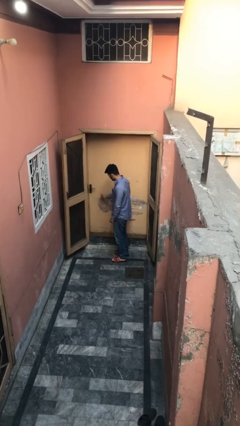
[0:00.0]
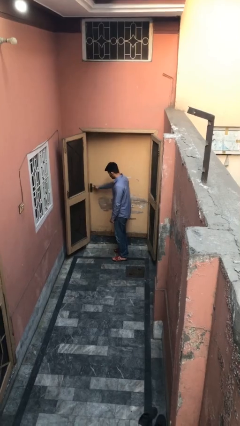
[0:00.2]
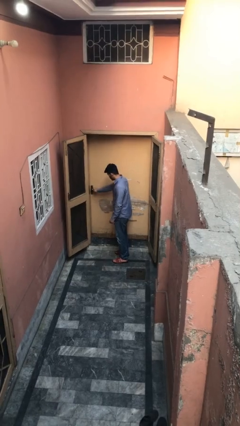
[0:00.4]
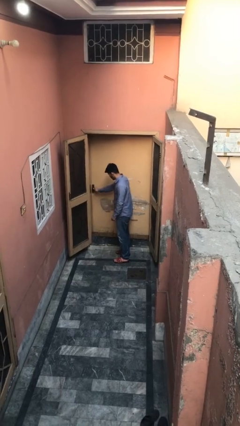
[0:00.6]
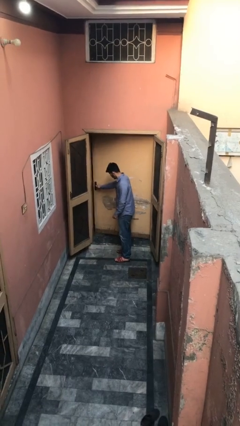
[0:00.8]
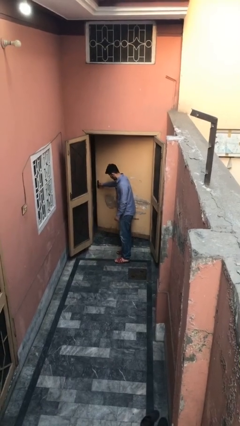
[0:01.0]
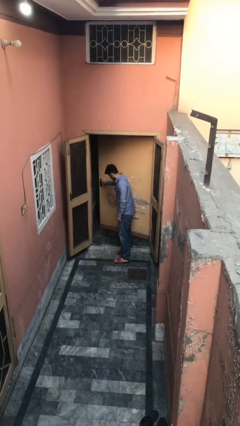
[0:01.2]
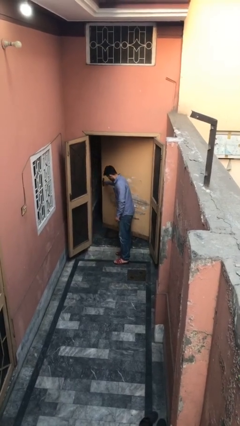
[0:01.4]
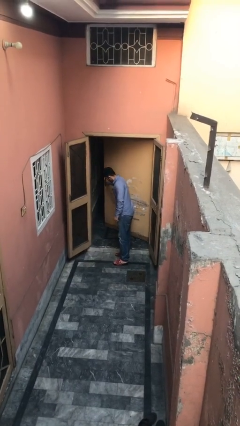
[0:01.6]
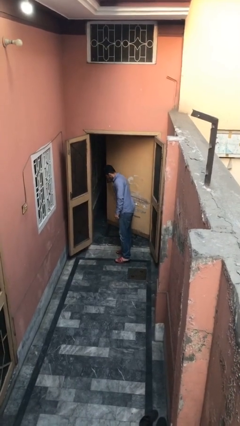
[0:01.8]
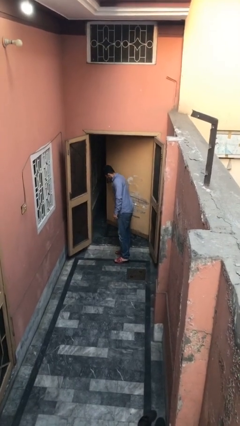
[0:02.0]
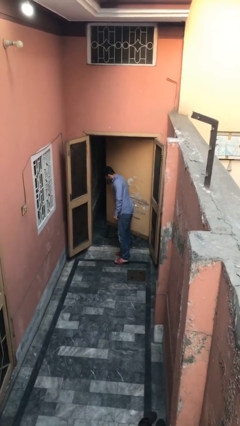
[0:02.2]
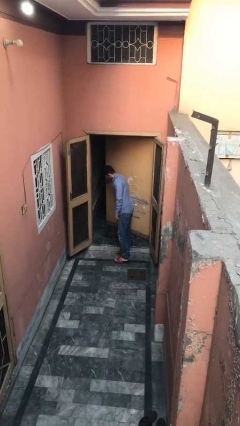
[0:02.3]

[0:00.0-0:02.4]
person opens facility door

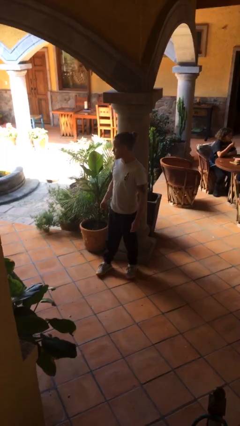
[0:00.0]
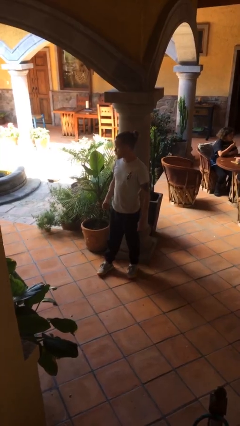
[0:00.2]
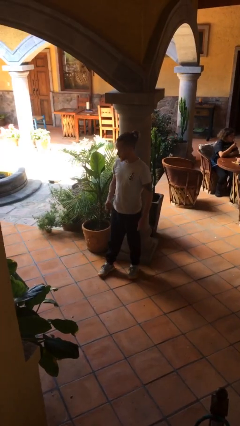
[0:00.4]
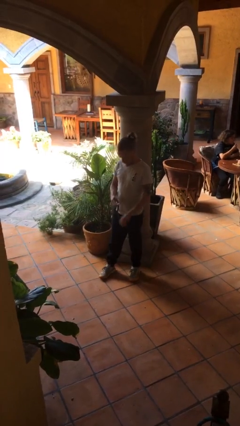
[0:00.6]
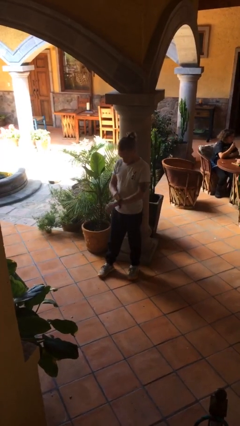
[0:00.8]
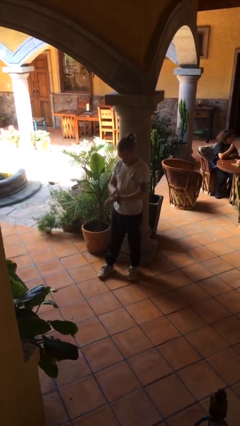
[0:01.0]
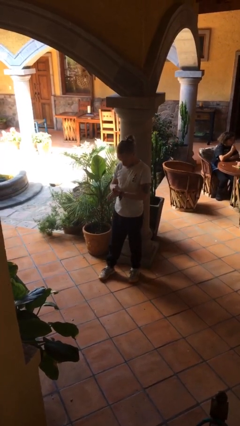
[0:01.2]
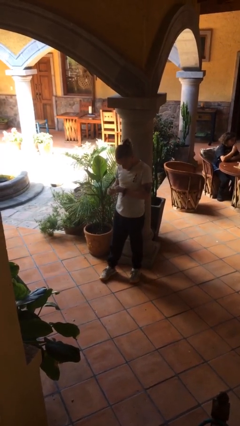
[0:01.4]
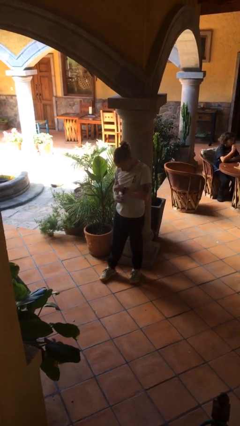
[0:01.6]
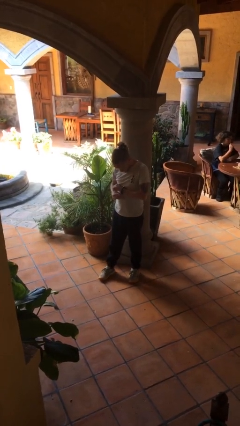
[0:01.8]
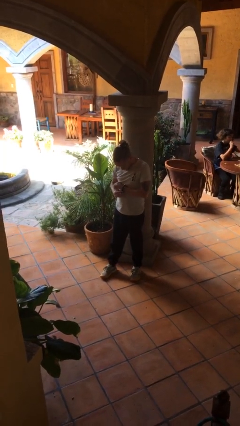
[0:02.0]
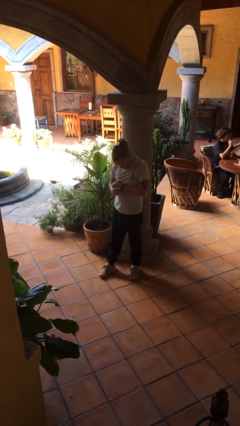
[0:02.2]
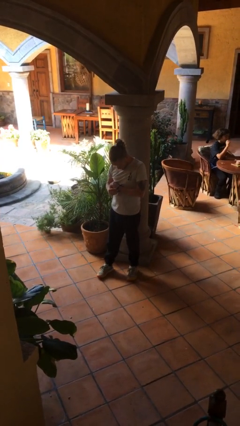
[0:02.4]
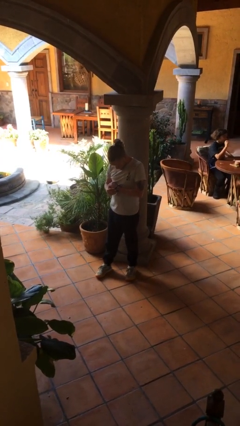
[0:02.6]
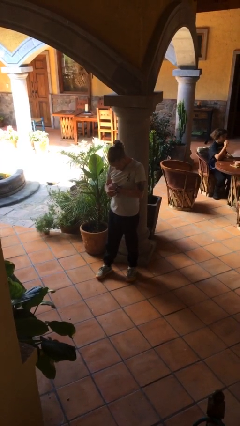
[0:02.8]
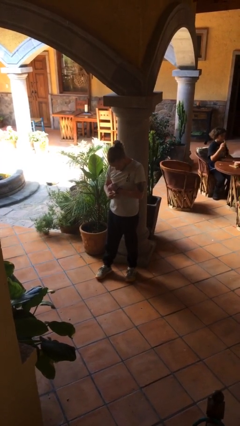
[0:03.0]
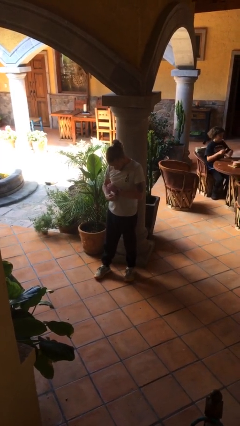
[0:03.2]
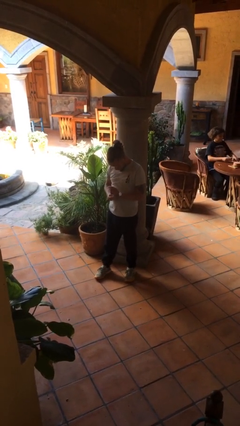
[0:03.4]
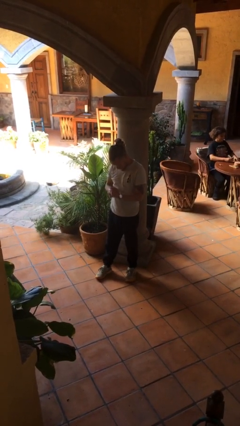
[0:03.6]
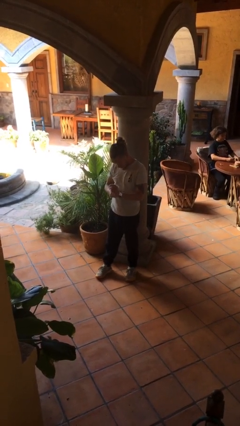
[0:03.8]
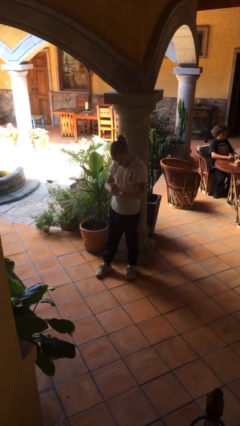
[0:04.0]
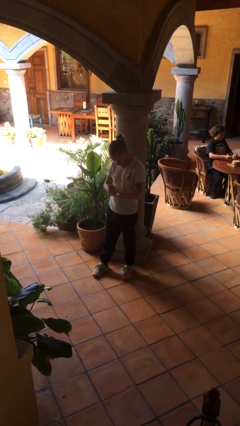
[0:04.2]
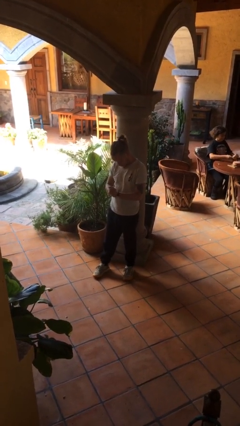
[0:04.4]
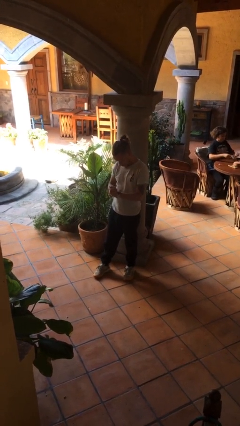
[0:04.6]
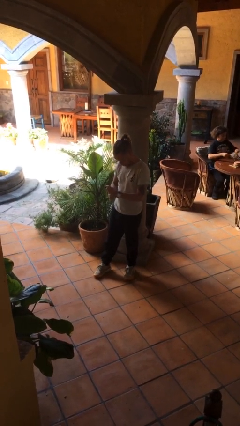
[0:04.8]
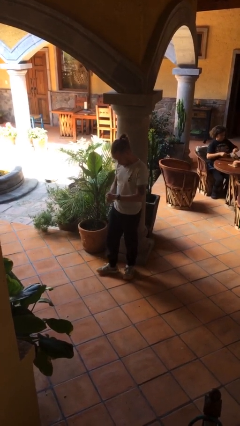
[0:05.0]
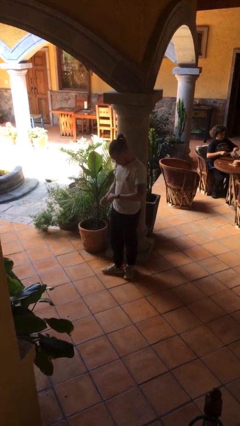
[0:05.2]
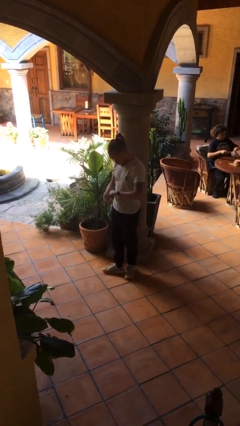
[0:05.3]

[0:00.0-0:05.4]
person puts on wristwatch

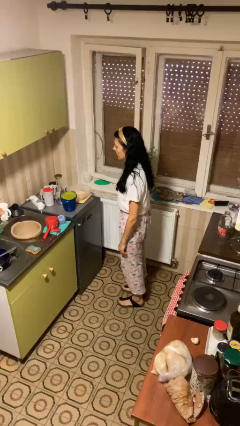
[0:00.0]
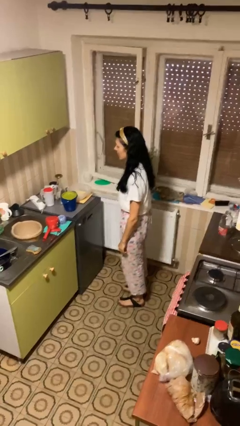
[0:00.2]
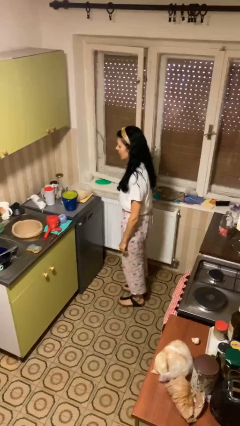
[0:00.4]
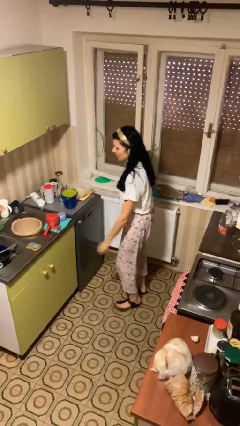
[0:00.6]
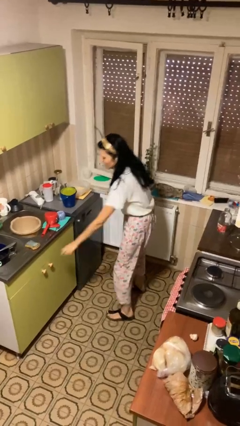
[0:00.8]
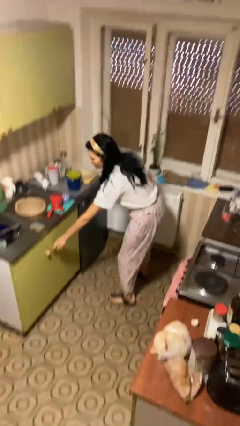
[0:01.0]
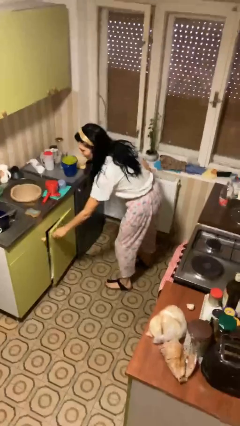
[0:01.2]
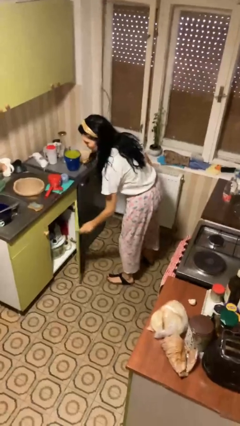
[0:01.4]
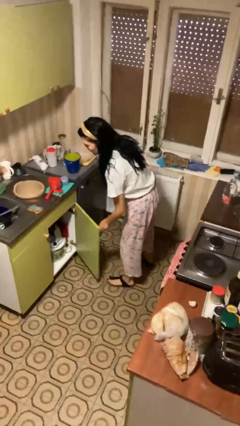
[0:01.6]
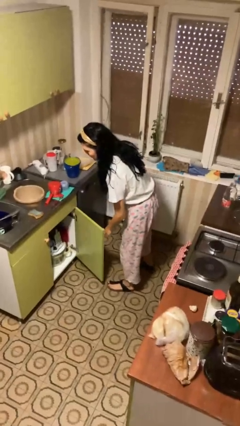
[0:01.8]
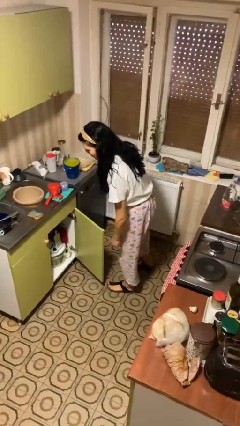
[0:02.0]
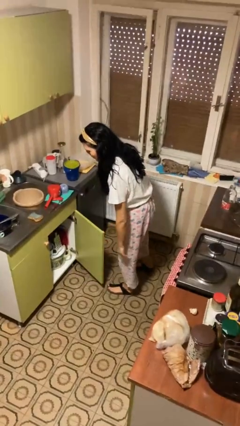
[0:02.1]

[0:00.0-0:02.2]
person opens cabinet

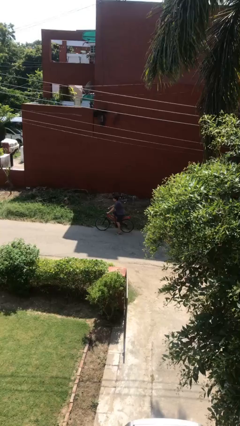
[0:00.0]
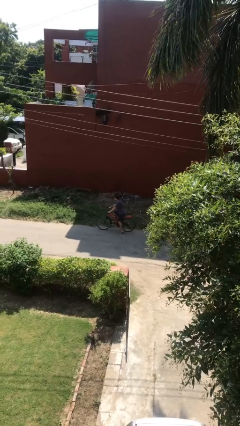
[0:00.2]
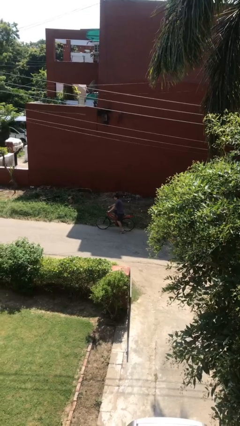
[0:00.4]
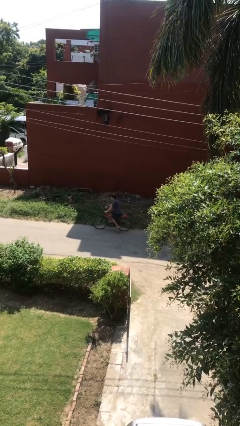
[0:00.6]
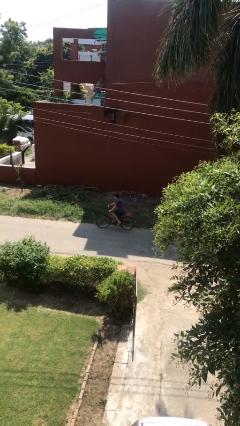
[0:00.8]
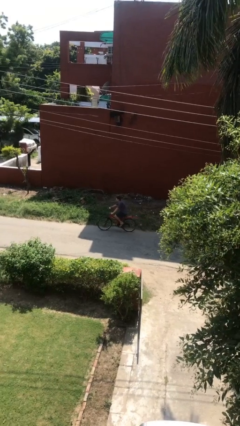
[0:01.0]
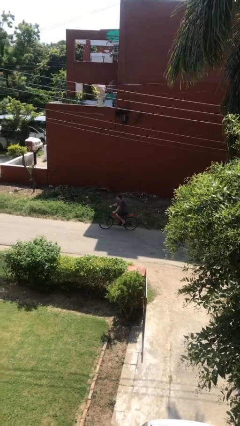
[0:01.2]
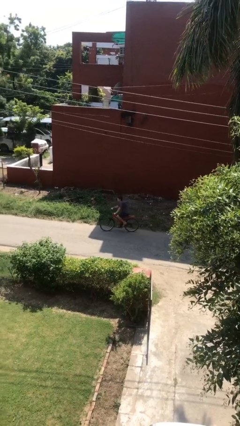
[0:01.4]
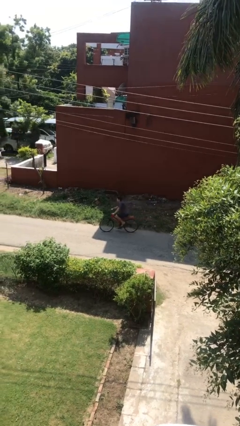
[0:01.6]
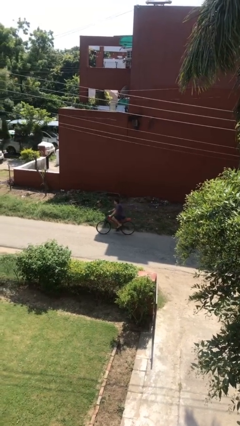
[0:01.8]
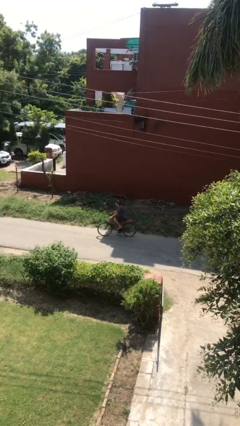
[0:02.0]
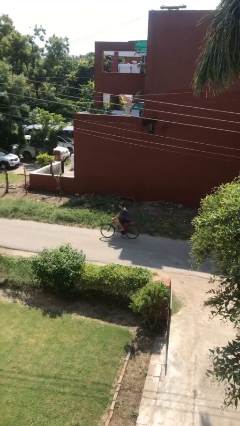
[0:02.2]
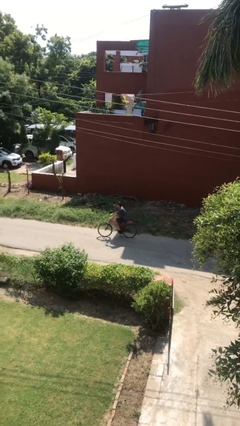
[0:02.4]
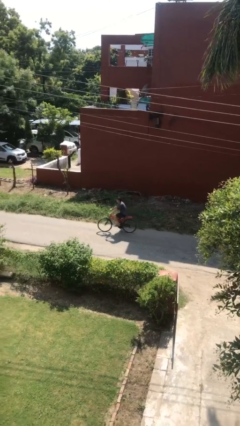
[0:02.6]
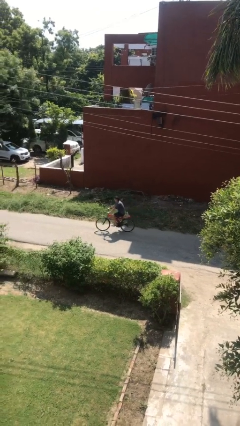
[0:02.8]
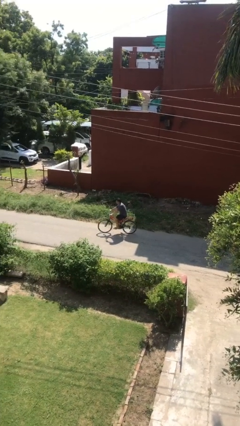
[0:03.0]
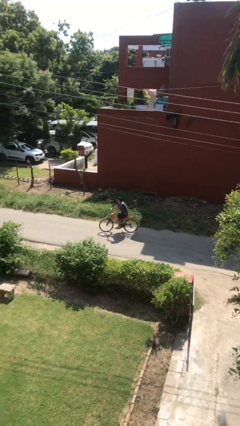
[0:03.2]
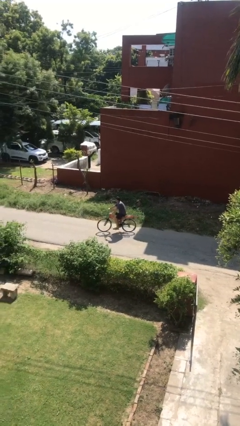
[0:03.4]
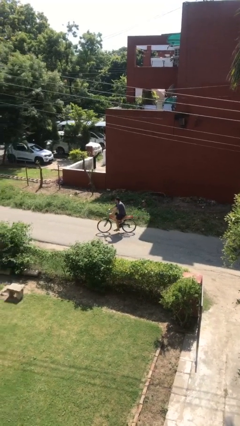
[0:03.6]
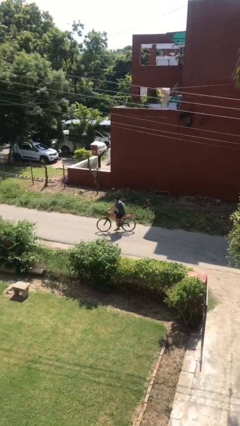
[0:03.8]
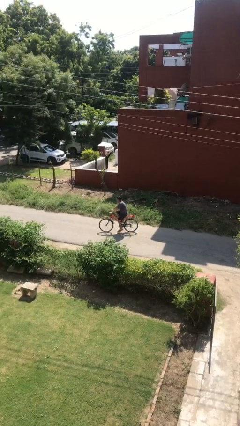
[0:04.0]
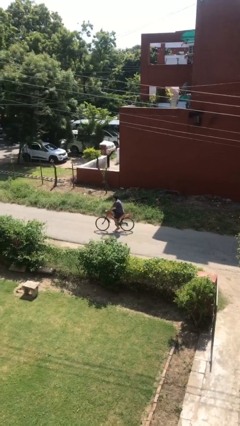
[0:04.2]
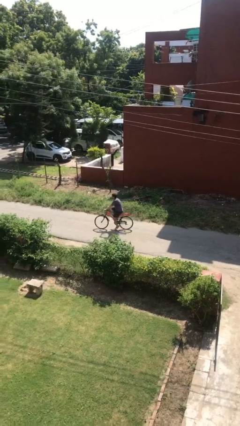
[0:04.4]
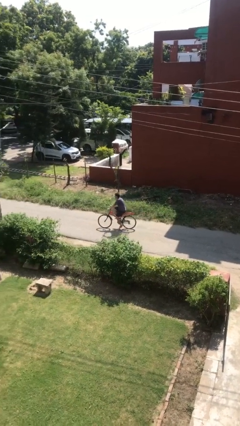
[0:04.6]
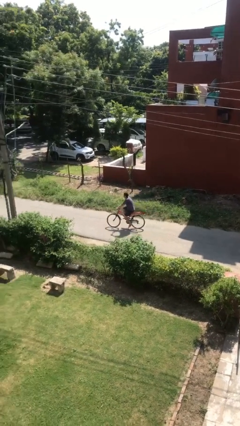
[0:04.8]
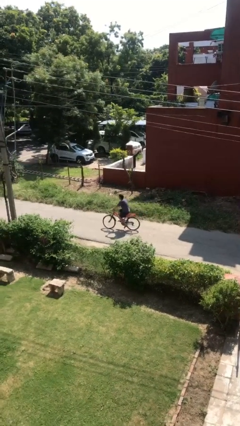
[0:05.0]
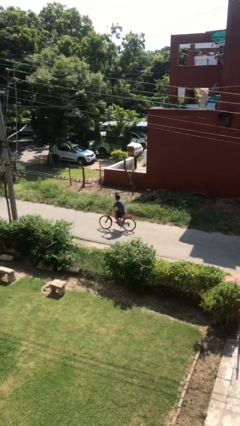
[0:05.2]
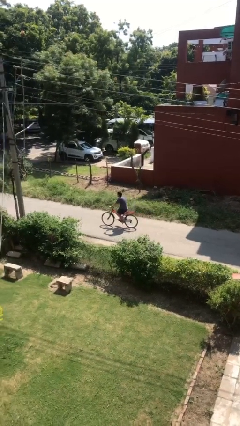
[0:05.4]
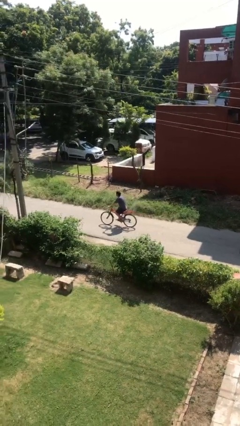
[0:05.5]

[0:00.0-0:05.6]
person rides bicycle

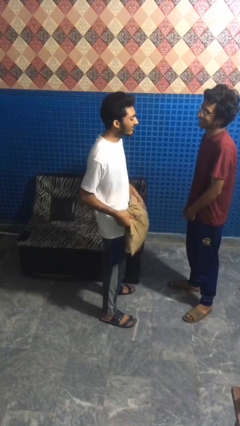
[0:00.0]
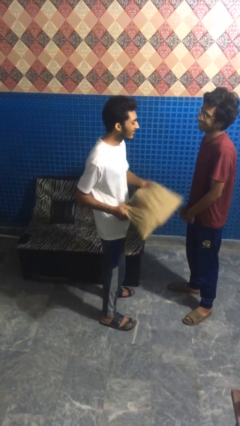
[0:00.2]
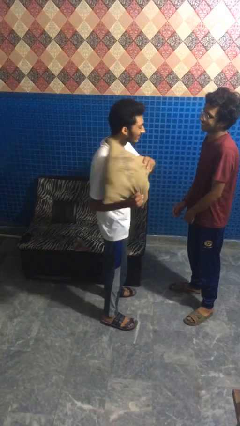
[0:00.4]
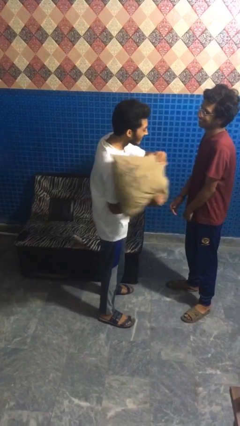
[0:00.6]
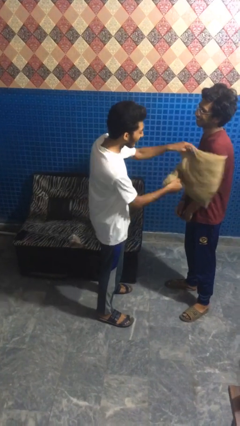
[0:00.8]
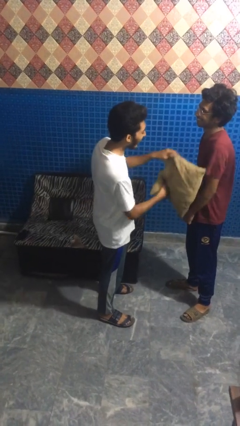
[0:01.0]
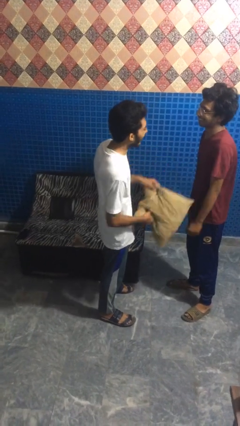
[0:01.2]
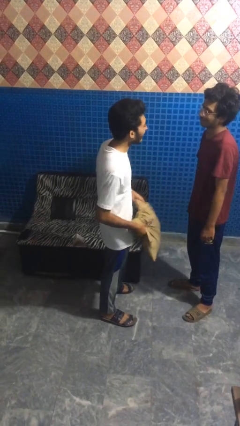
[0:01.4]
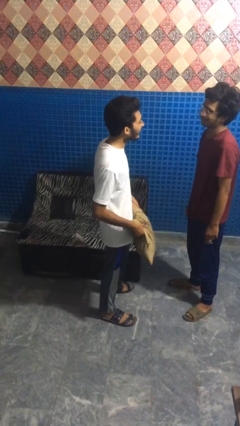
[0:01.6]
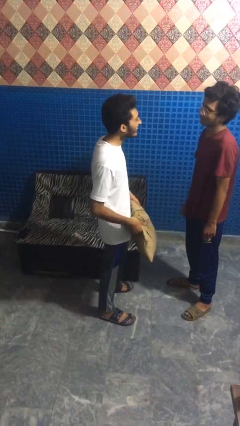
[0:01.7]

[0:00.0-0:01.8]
person hits person with pillow
